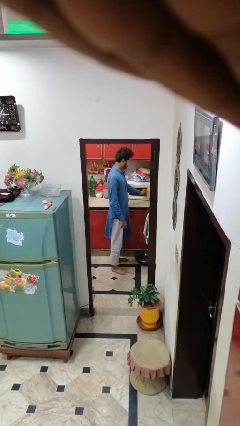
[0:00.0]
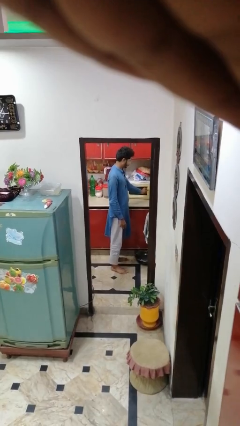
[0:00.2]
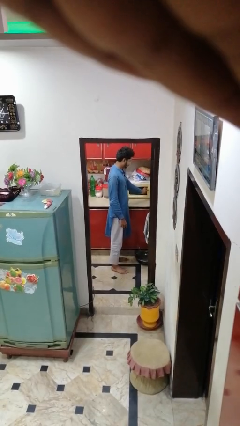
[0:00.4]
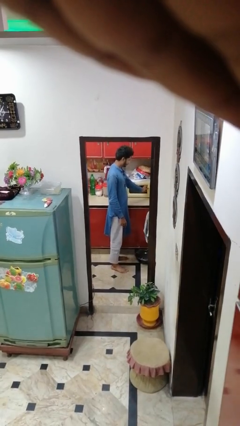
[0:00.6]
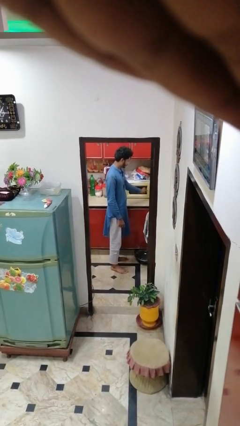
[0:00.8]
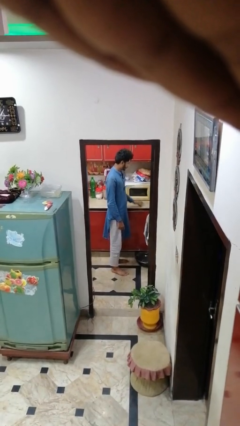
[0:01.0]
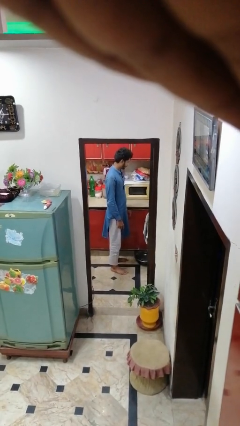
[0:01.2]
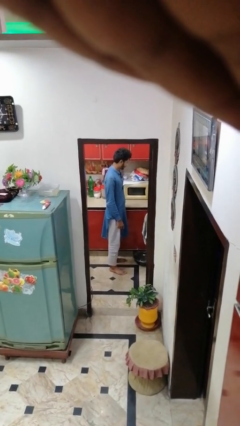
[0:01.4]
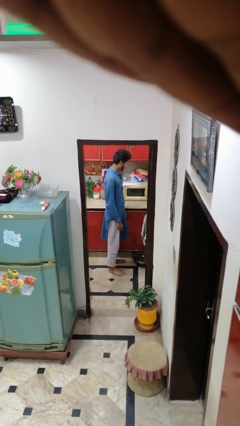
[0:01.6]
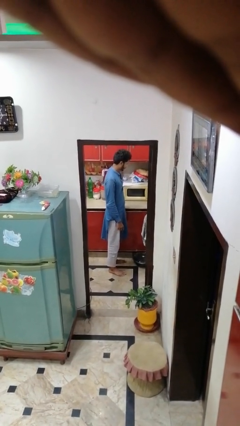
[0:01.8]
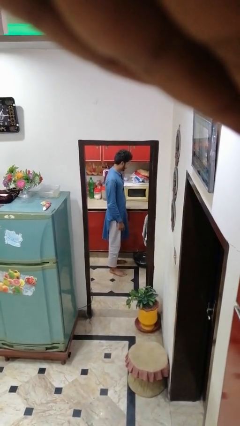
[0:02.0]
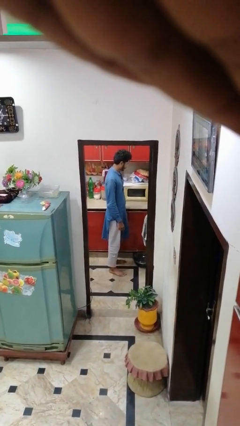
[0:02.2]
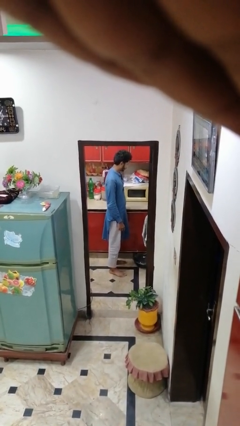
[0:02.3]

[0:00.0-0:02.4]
person closes microwave

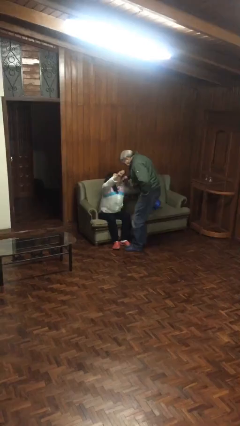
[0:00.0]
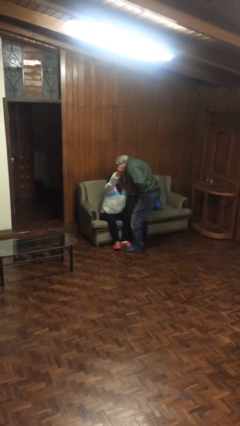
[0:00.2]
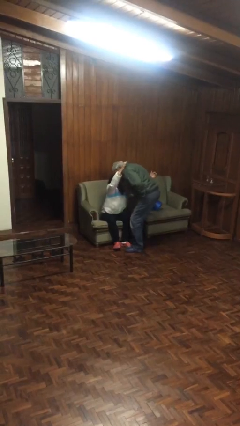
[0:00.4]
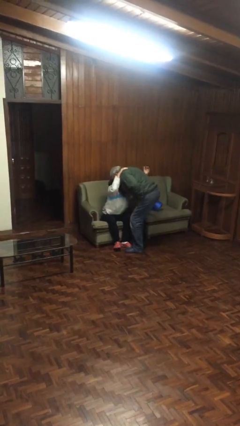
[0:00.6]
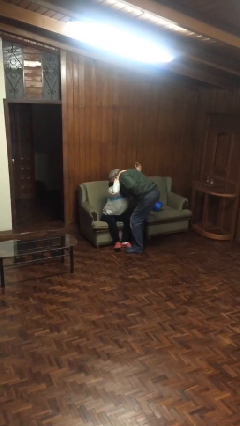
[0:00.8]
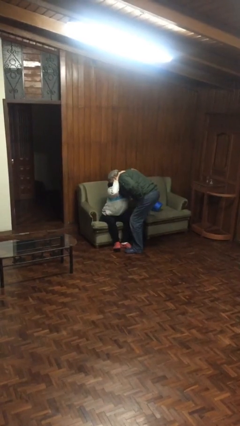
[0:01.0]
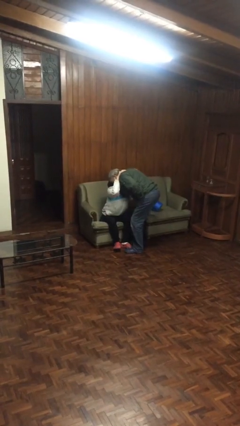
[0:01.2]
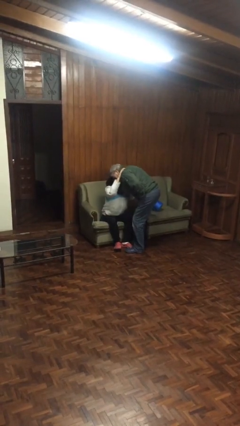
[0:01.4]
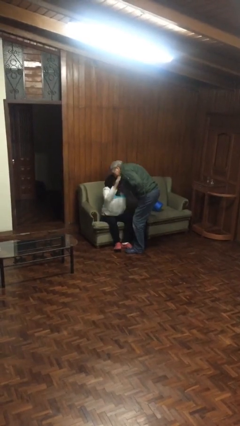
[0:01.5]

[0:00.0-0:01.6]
person embraces person

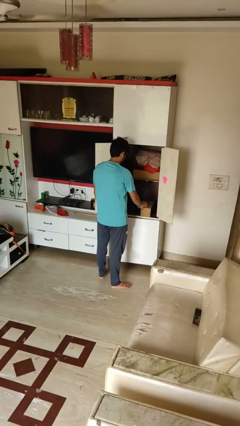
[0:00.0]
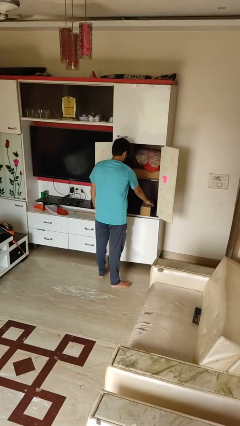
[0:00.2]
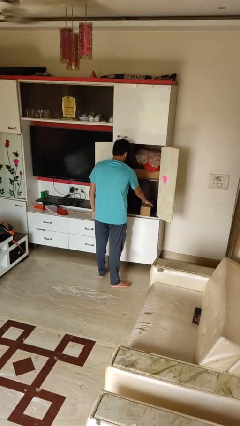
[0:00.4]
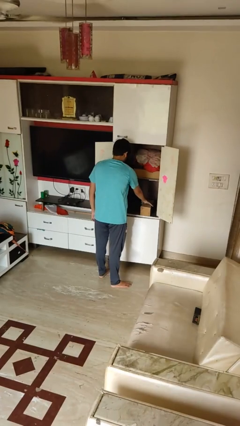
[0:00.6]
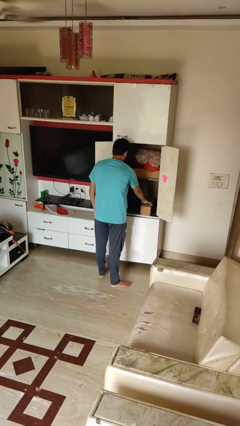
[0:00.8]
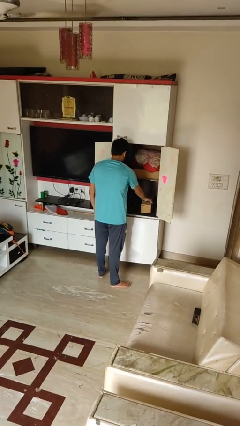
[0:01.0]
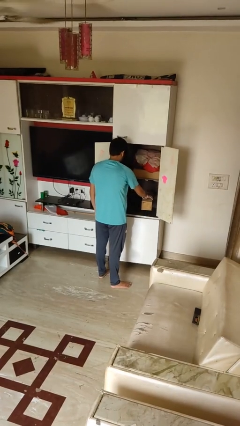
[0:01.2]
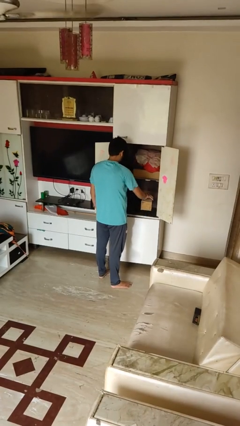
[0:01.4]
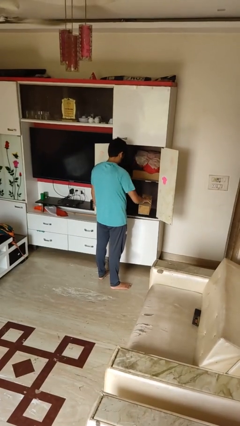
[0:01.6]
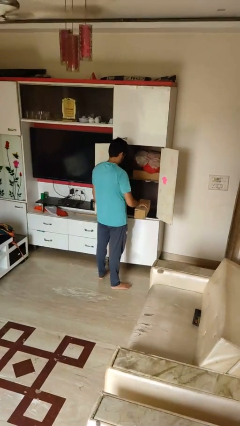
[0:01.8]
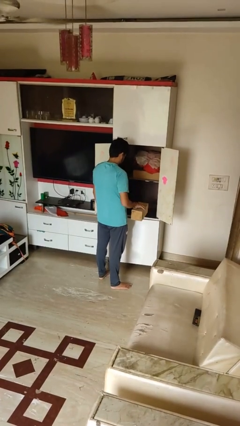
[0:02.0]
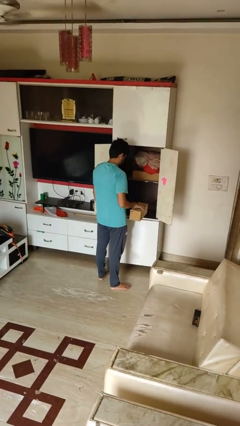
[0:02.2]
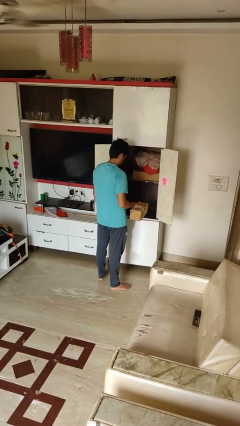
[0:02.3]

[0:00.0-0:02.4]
person picks up object from cabinet

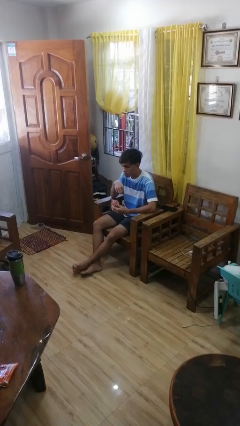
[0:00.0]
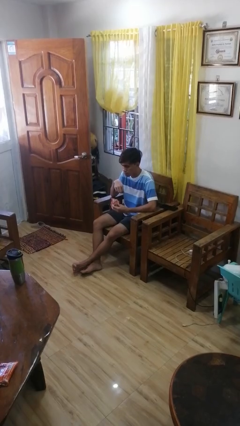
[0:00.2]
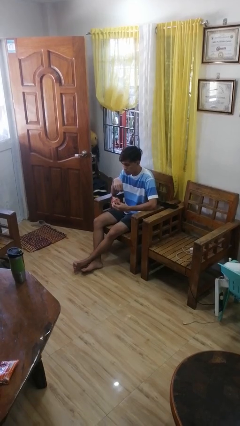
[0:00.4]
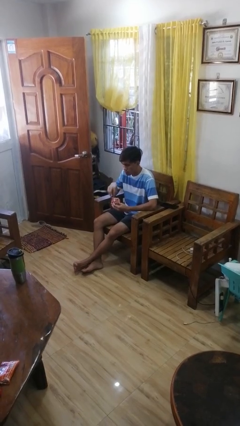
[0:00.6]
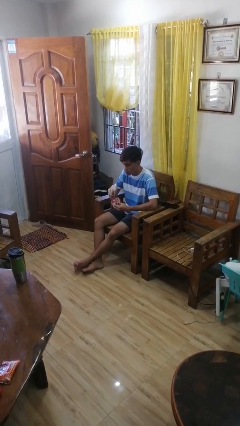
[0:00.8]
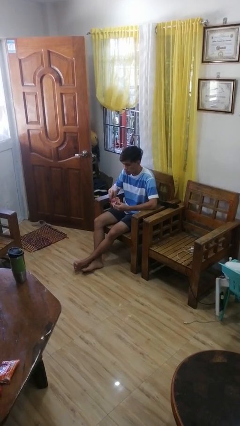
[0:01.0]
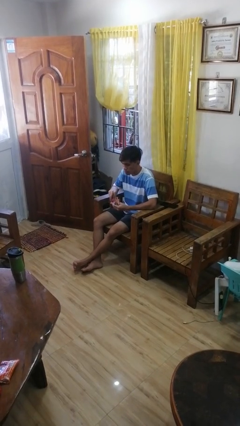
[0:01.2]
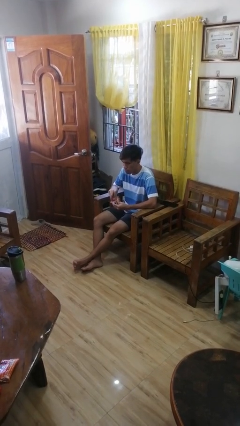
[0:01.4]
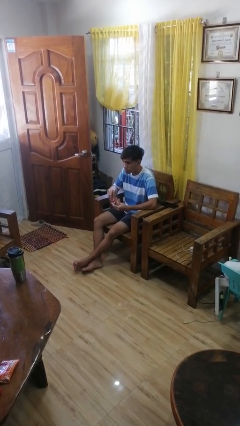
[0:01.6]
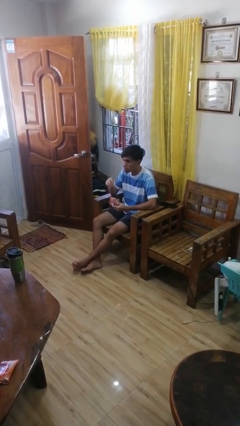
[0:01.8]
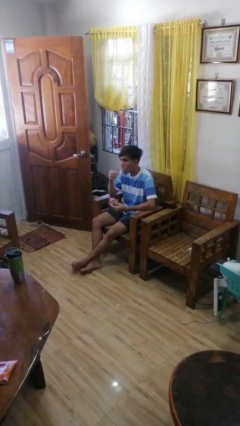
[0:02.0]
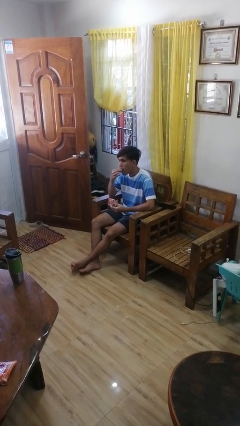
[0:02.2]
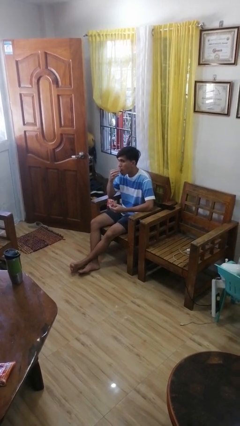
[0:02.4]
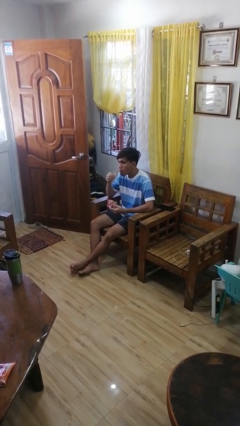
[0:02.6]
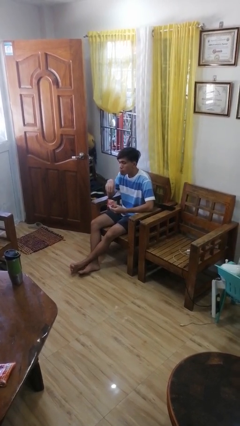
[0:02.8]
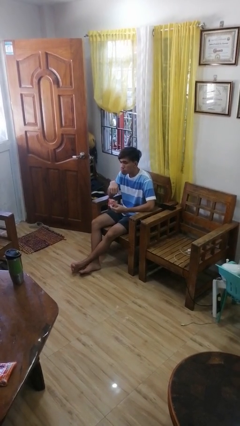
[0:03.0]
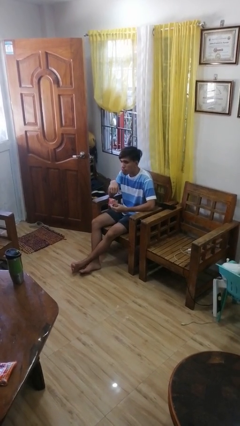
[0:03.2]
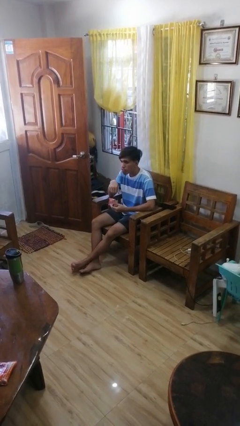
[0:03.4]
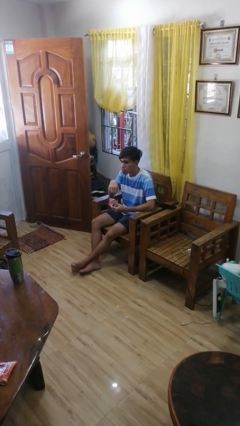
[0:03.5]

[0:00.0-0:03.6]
person eats snack from bag

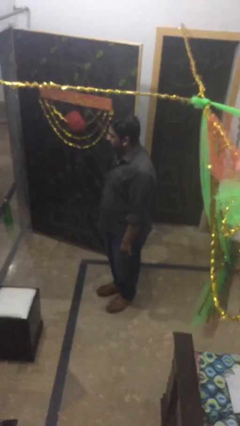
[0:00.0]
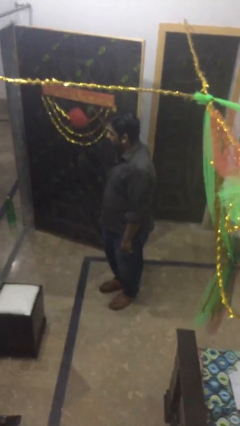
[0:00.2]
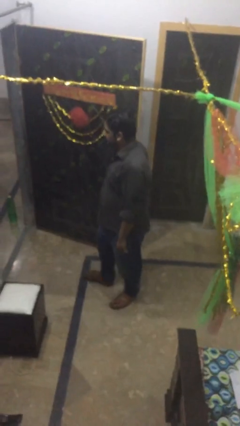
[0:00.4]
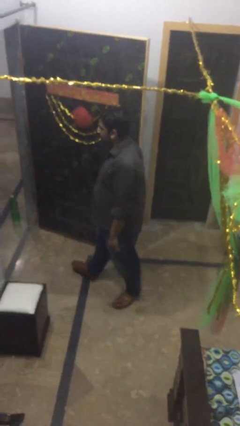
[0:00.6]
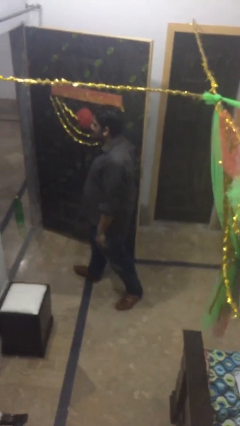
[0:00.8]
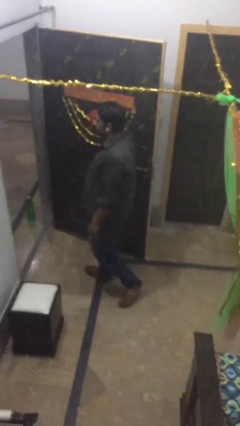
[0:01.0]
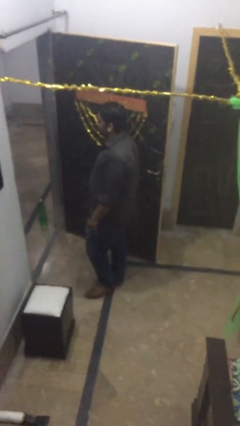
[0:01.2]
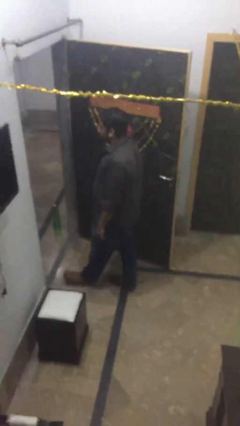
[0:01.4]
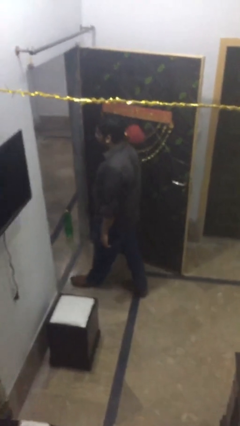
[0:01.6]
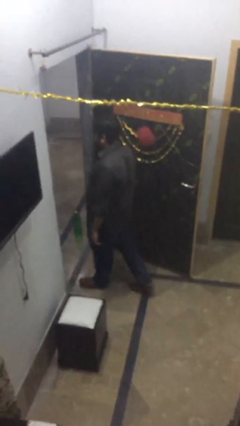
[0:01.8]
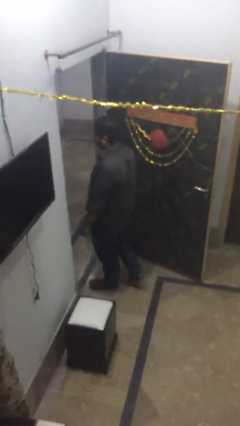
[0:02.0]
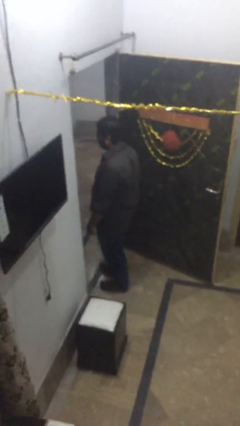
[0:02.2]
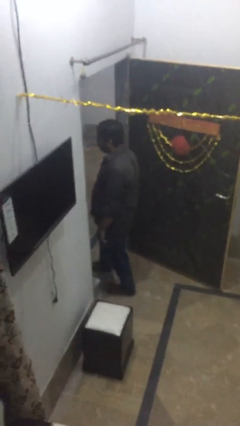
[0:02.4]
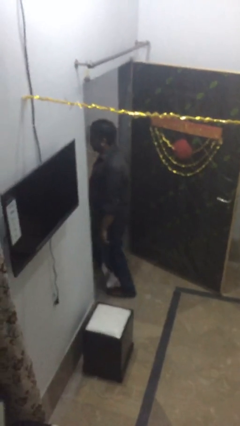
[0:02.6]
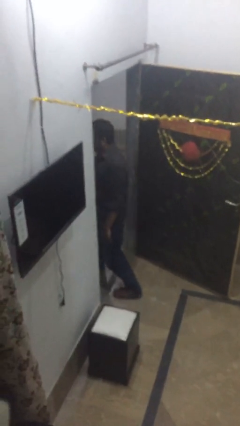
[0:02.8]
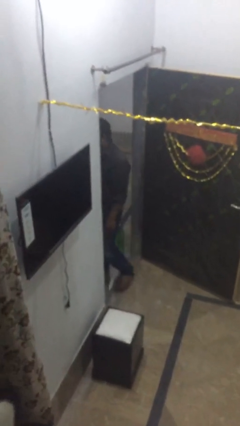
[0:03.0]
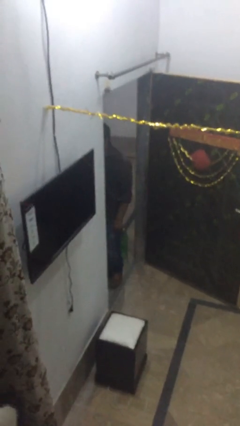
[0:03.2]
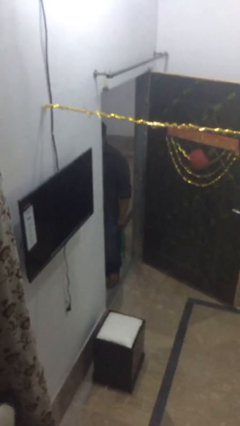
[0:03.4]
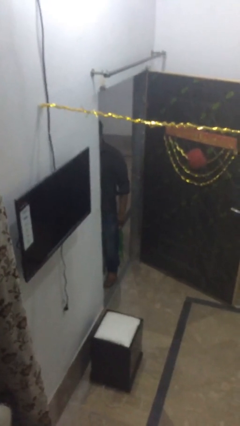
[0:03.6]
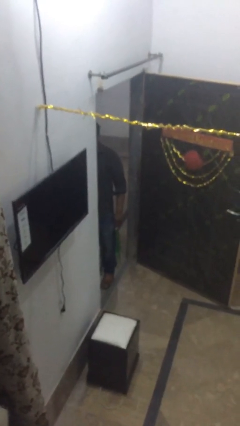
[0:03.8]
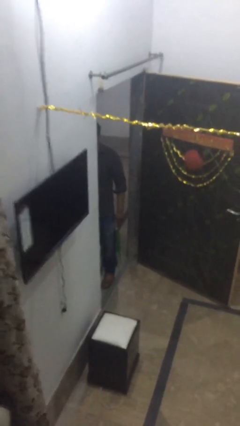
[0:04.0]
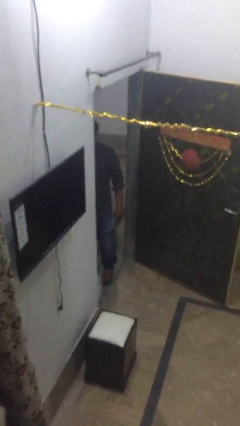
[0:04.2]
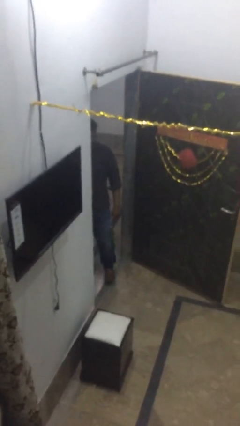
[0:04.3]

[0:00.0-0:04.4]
person exits scene through structure

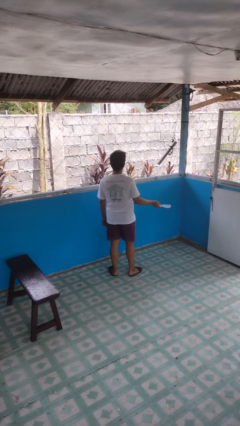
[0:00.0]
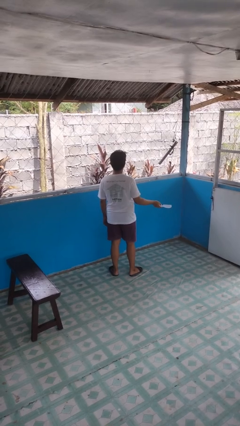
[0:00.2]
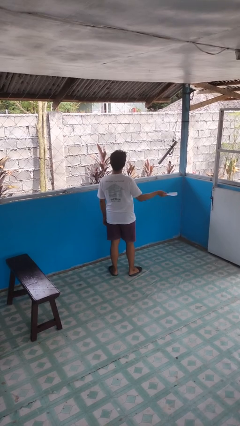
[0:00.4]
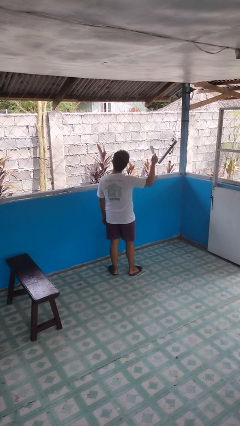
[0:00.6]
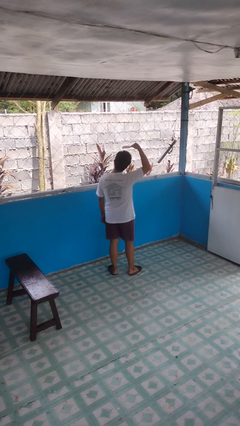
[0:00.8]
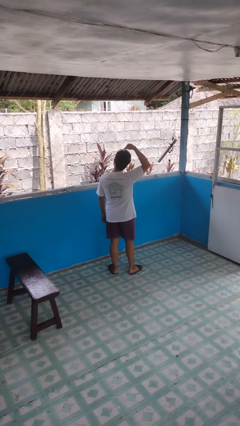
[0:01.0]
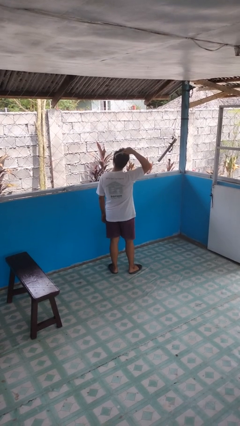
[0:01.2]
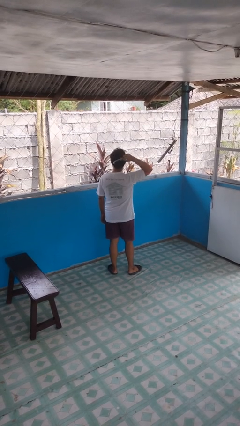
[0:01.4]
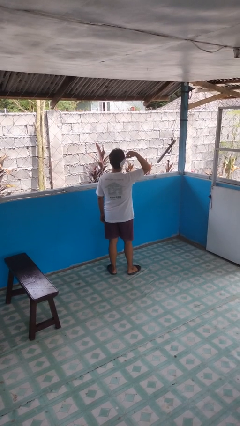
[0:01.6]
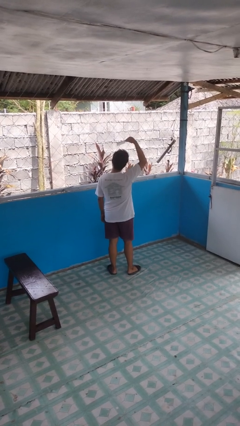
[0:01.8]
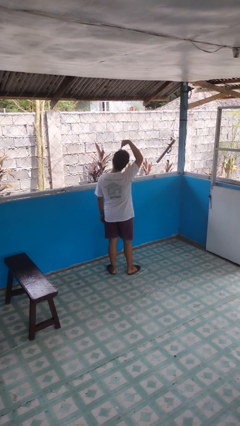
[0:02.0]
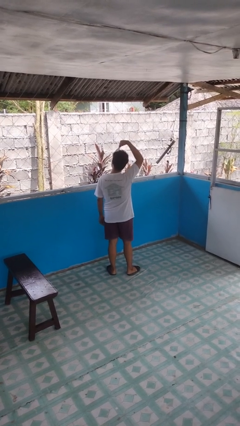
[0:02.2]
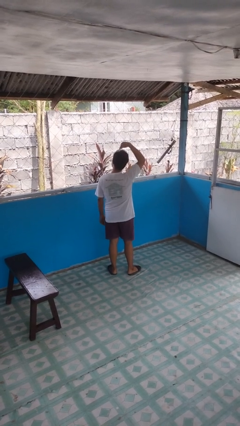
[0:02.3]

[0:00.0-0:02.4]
person brushes hair

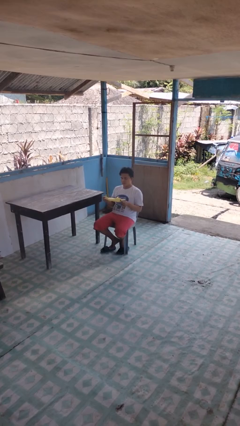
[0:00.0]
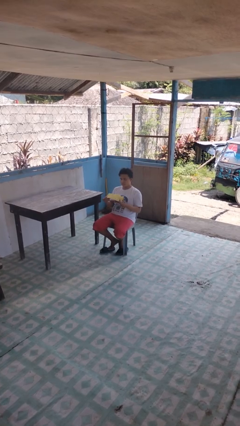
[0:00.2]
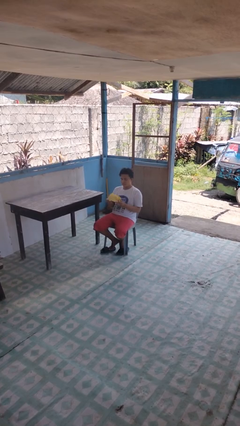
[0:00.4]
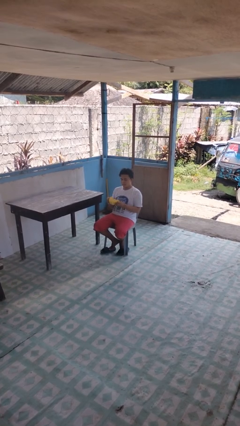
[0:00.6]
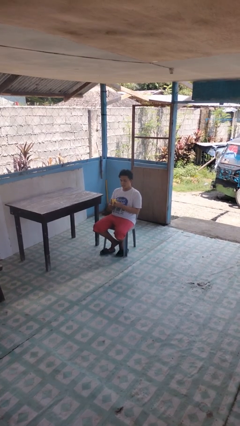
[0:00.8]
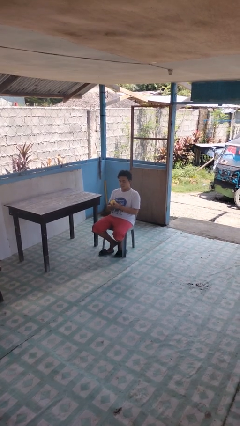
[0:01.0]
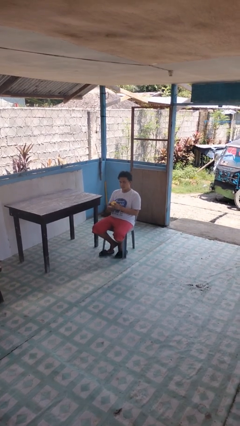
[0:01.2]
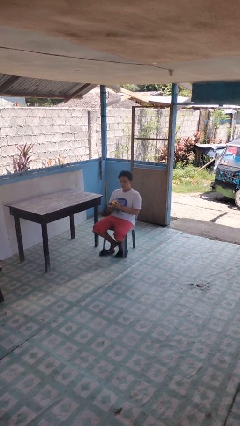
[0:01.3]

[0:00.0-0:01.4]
person crumples paper
